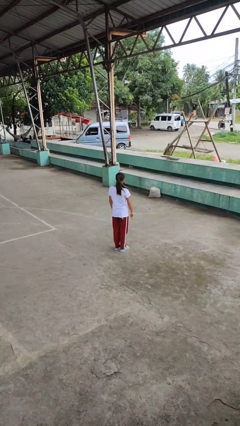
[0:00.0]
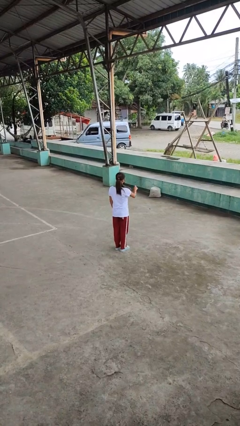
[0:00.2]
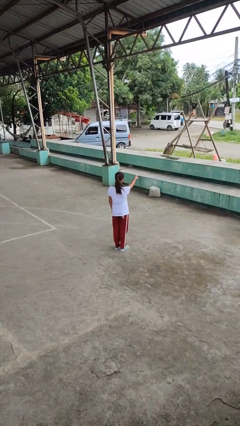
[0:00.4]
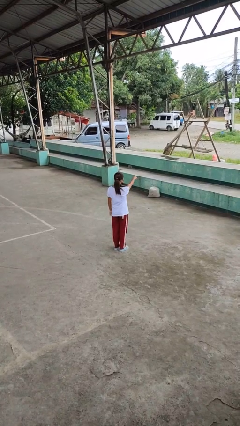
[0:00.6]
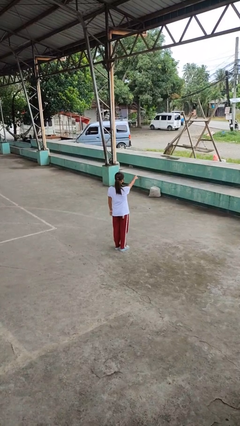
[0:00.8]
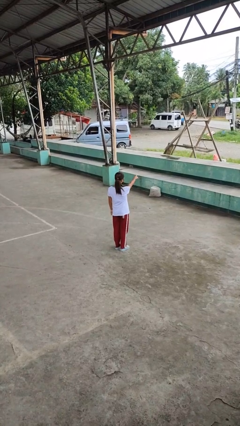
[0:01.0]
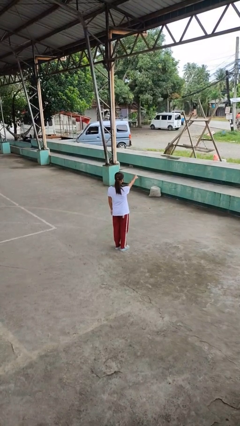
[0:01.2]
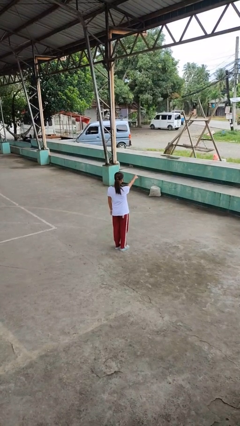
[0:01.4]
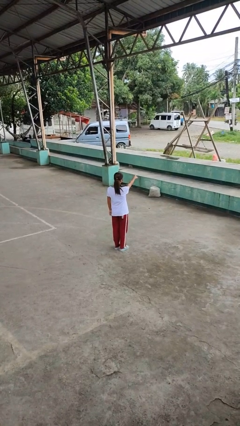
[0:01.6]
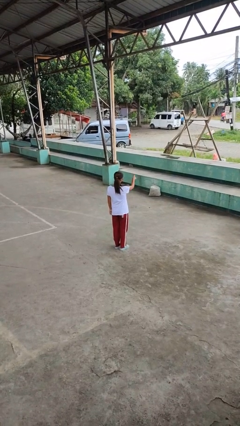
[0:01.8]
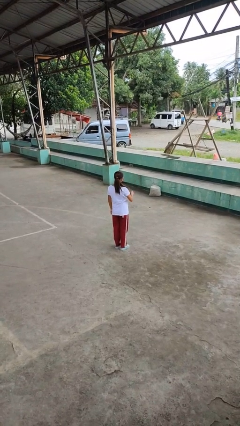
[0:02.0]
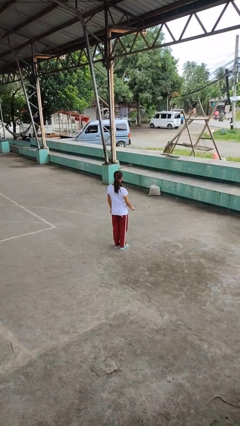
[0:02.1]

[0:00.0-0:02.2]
person points at person

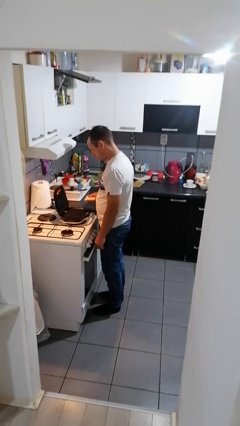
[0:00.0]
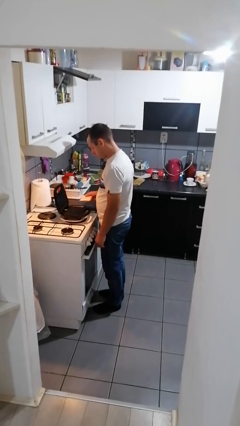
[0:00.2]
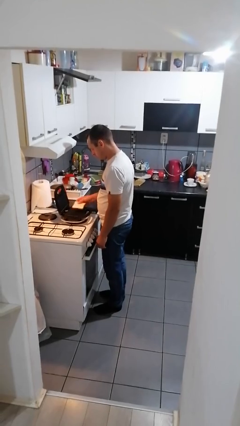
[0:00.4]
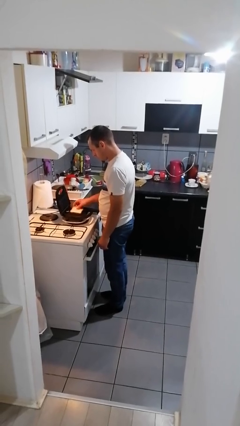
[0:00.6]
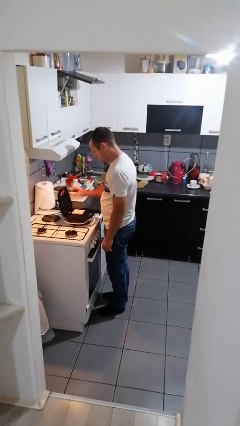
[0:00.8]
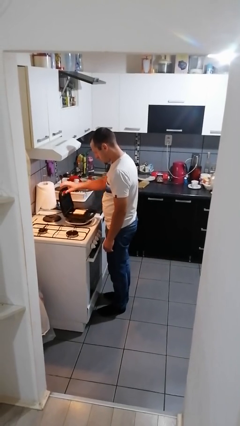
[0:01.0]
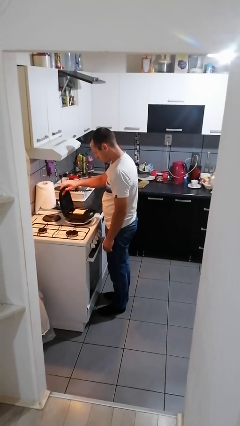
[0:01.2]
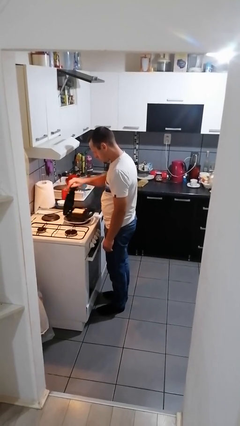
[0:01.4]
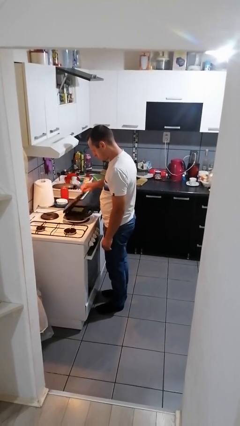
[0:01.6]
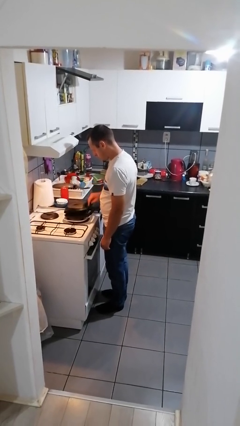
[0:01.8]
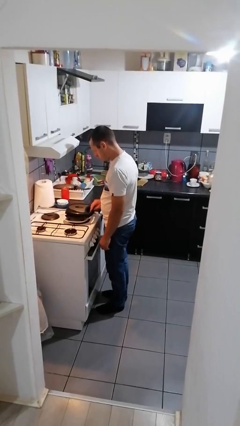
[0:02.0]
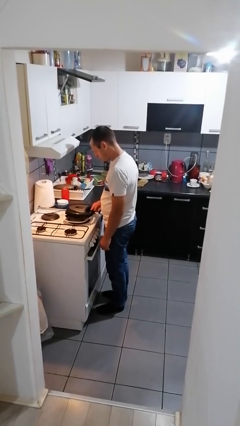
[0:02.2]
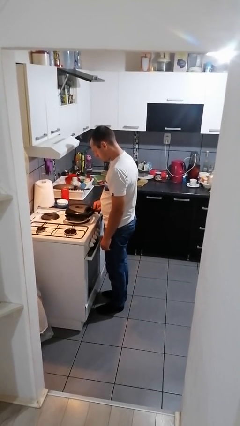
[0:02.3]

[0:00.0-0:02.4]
person puts object into toaster

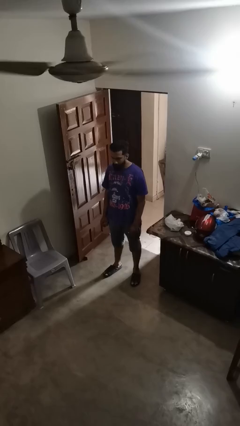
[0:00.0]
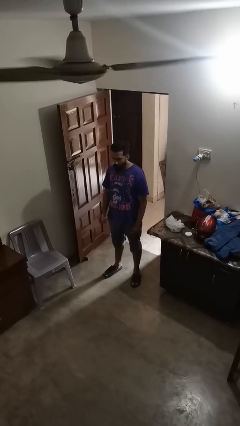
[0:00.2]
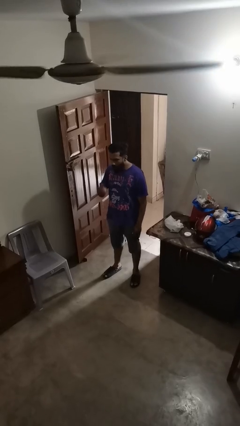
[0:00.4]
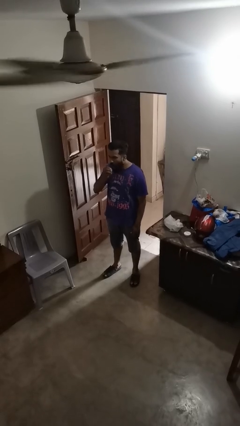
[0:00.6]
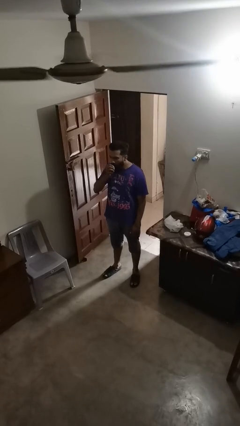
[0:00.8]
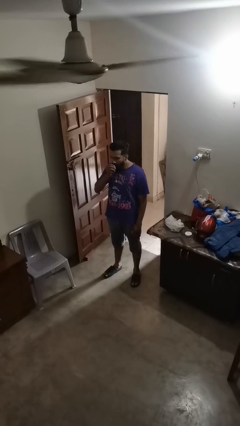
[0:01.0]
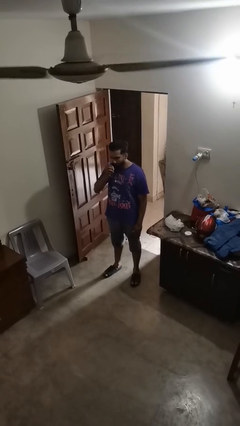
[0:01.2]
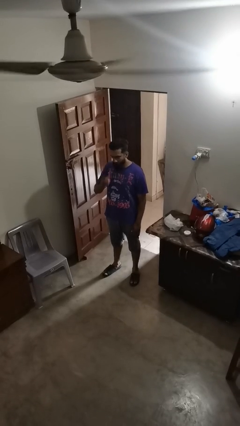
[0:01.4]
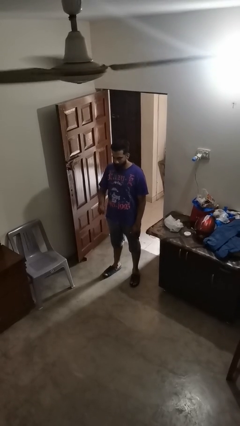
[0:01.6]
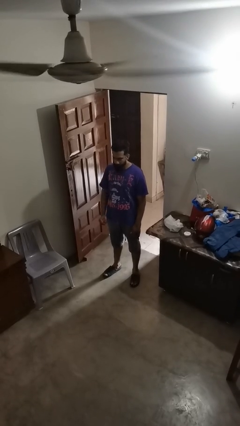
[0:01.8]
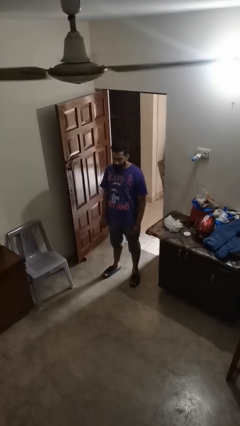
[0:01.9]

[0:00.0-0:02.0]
person eats apple

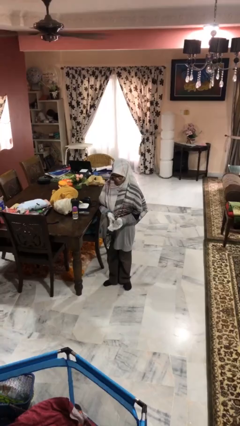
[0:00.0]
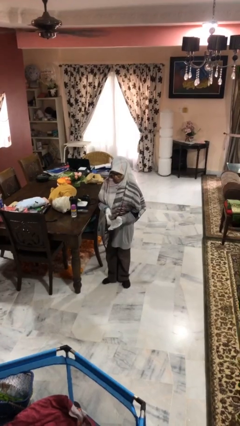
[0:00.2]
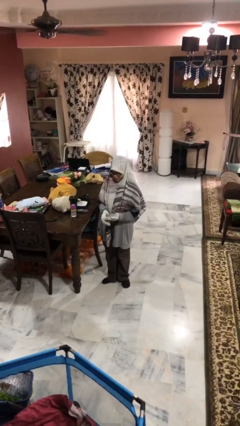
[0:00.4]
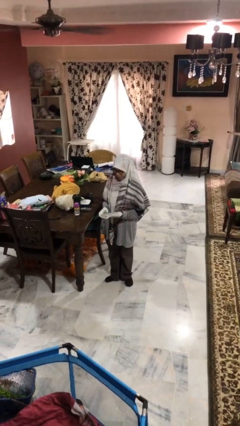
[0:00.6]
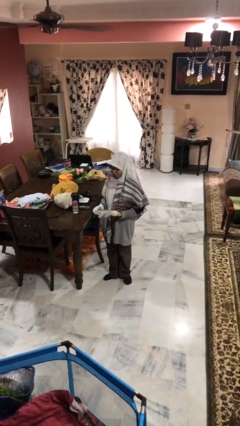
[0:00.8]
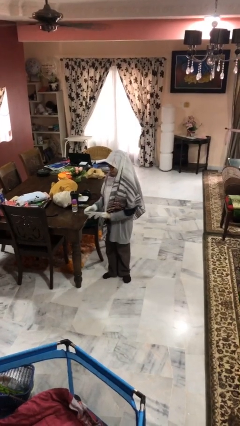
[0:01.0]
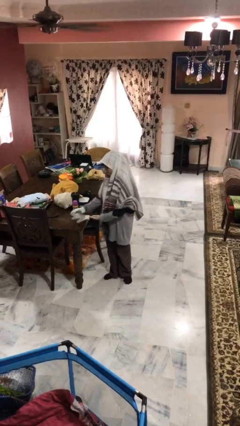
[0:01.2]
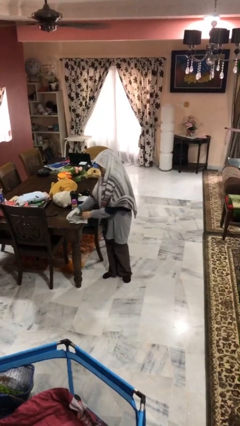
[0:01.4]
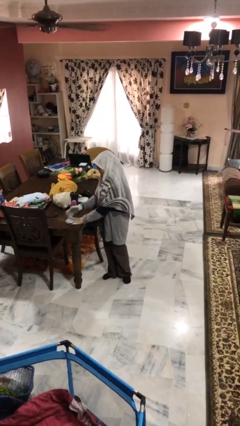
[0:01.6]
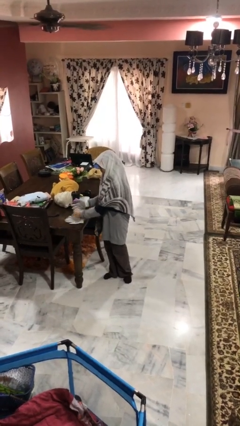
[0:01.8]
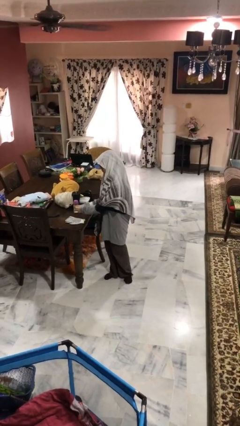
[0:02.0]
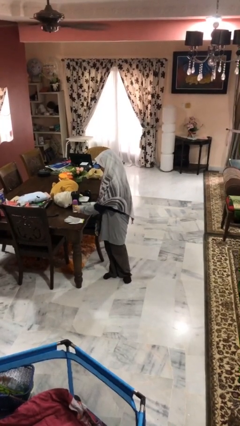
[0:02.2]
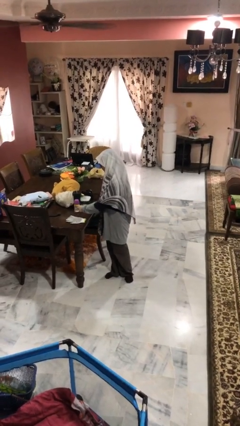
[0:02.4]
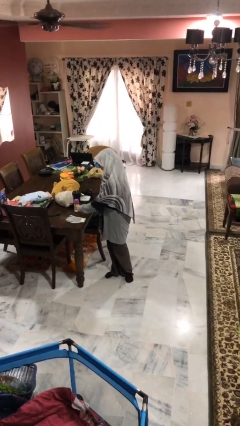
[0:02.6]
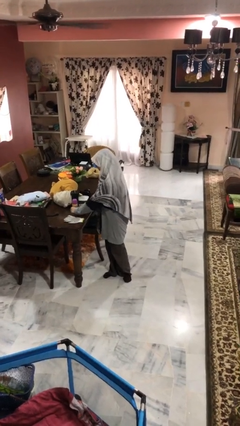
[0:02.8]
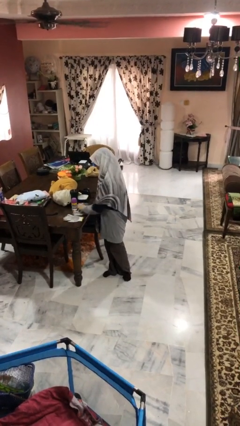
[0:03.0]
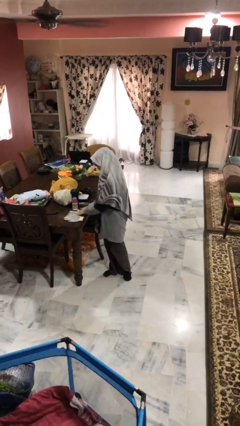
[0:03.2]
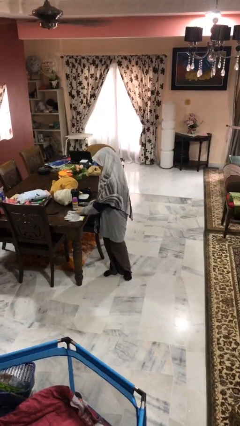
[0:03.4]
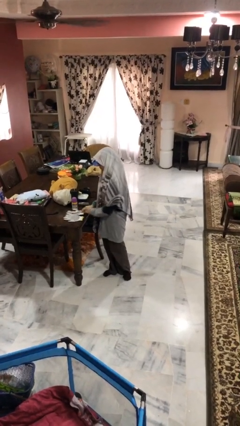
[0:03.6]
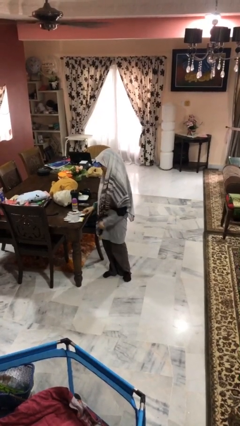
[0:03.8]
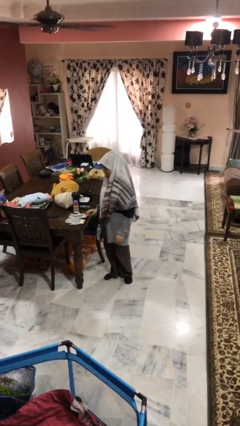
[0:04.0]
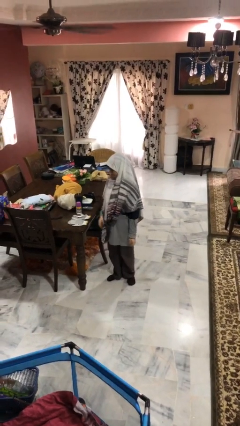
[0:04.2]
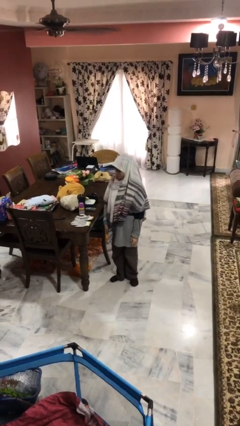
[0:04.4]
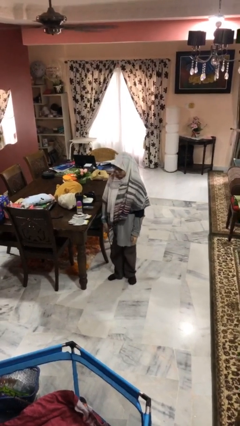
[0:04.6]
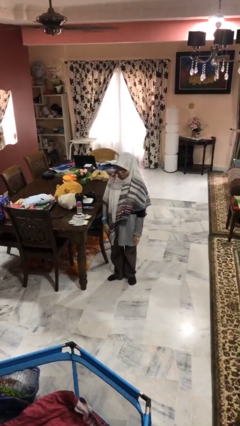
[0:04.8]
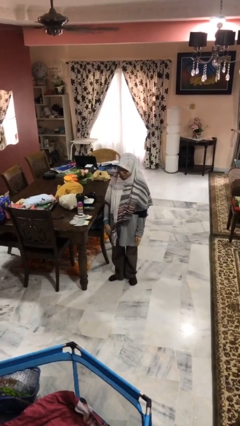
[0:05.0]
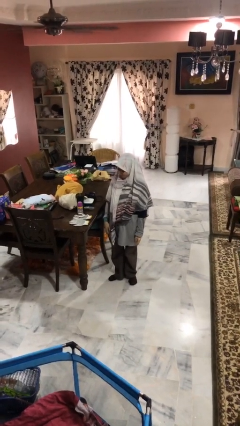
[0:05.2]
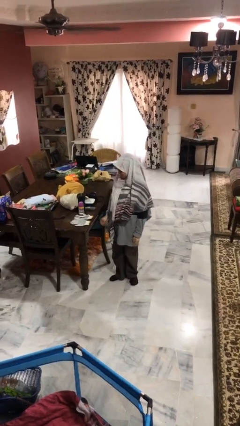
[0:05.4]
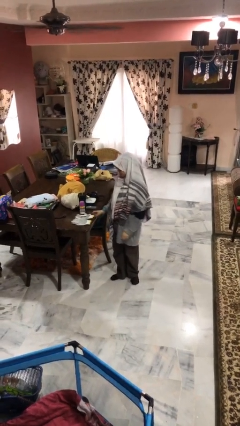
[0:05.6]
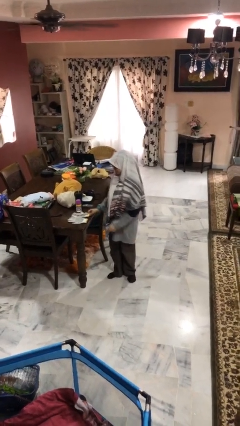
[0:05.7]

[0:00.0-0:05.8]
person takes off gloves

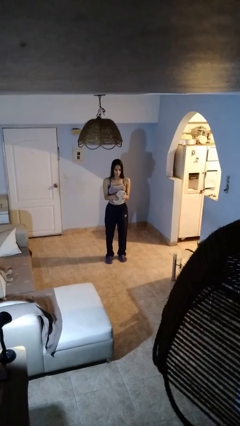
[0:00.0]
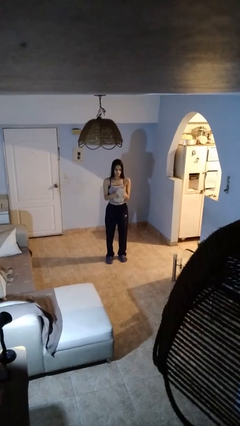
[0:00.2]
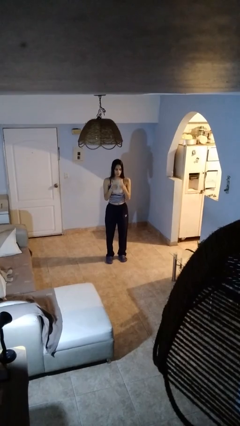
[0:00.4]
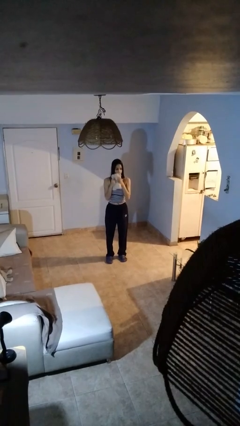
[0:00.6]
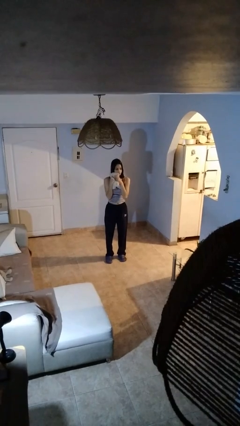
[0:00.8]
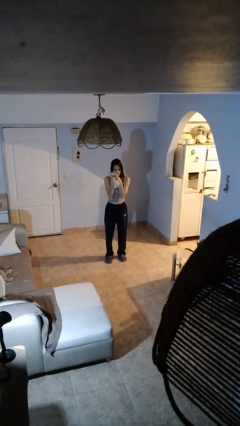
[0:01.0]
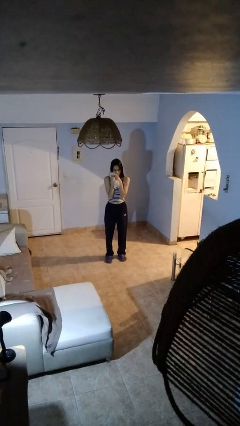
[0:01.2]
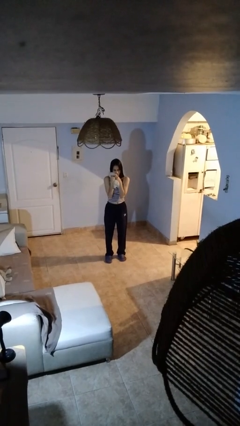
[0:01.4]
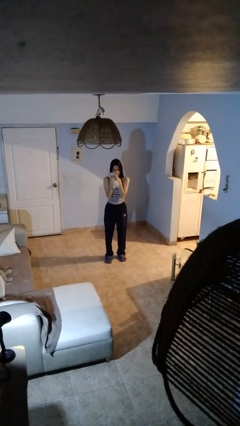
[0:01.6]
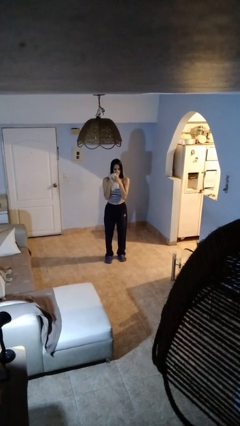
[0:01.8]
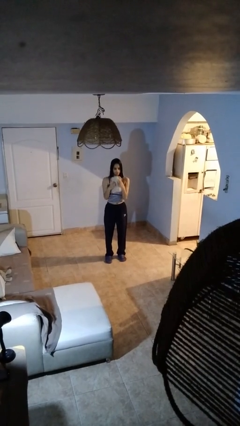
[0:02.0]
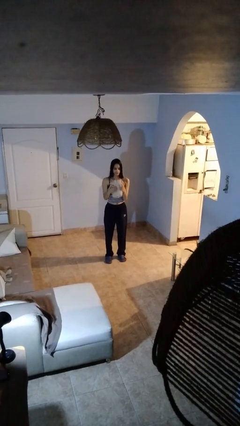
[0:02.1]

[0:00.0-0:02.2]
person hugs stuffed animal

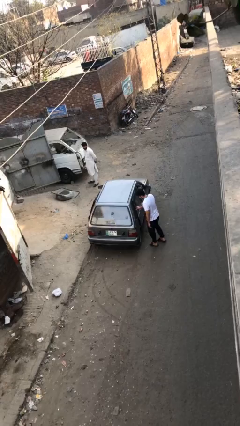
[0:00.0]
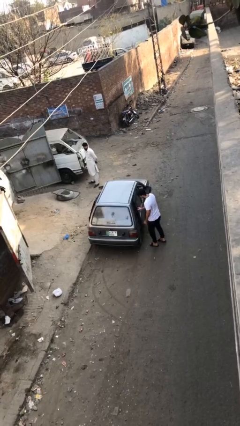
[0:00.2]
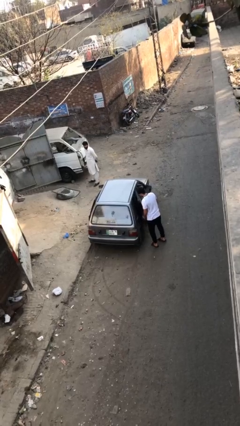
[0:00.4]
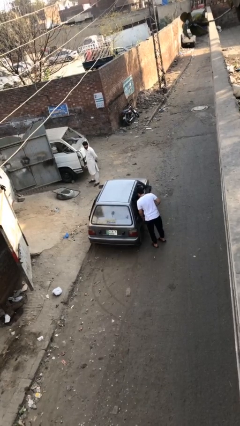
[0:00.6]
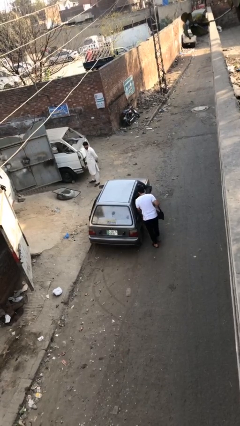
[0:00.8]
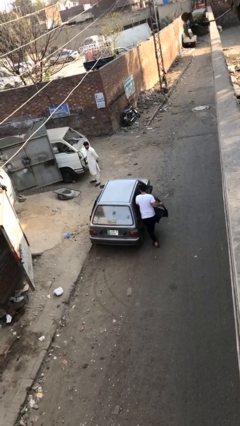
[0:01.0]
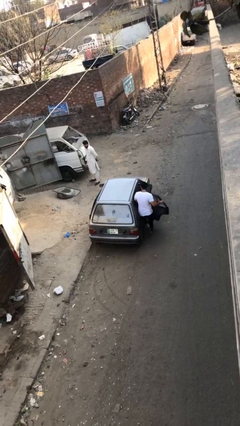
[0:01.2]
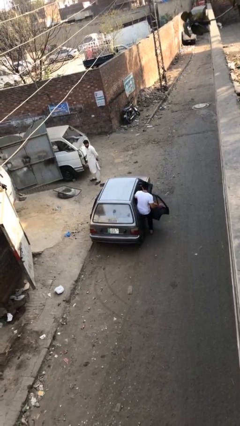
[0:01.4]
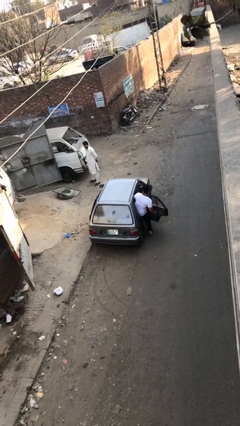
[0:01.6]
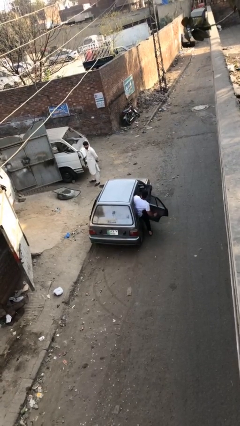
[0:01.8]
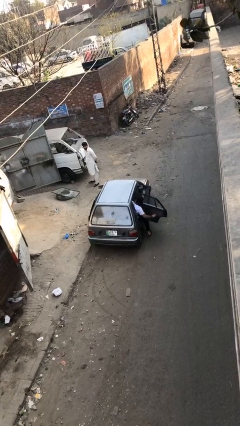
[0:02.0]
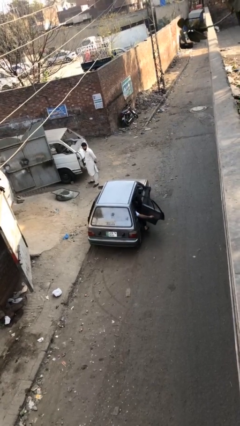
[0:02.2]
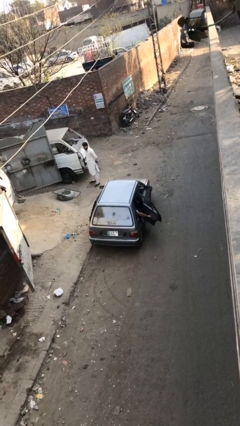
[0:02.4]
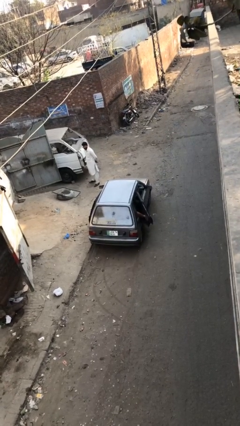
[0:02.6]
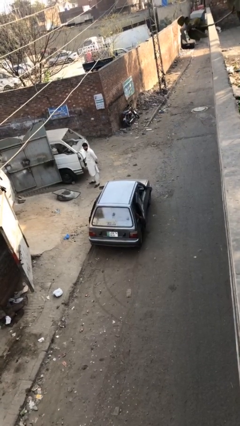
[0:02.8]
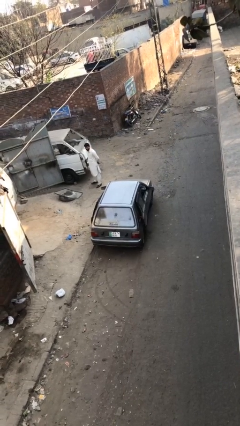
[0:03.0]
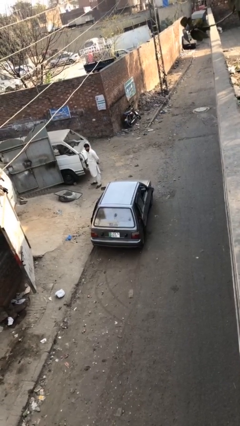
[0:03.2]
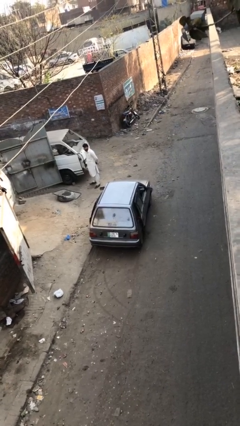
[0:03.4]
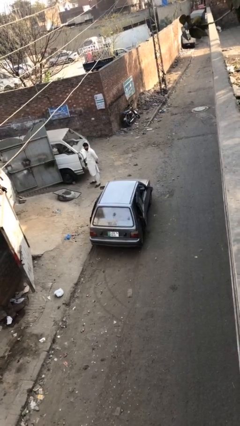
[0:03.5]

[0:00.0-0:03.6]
car picks up person
